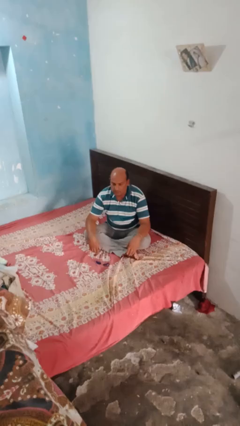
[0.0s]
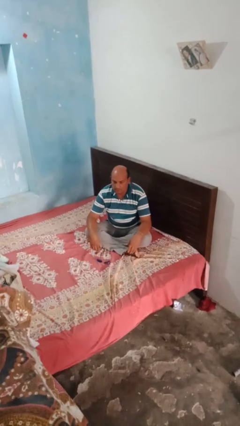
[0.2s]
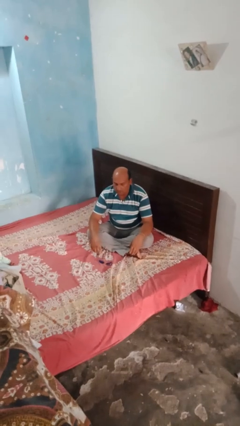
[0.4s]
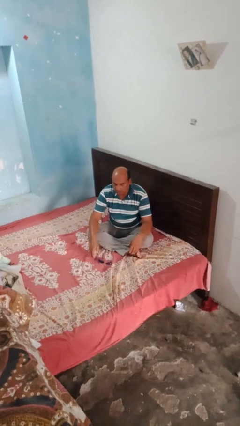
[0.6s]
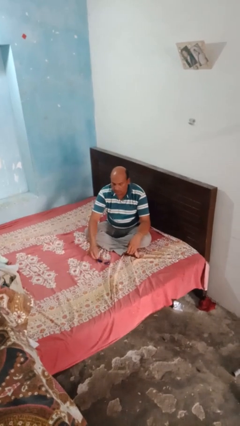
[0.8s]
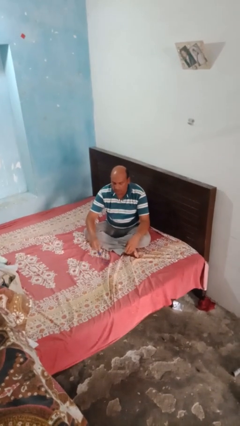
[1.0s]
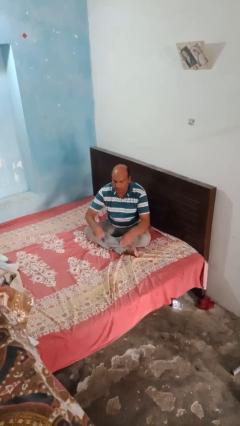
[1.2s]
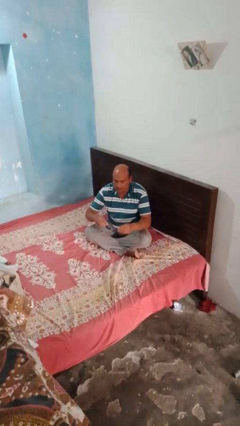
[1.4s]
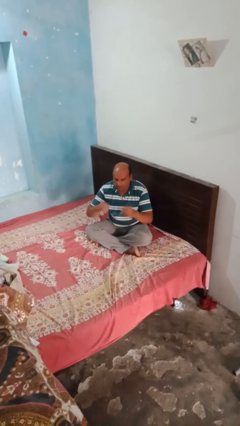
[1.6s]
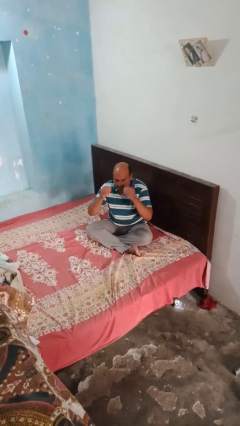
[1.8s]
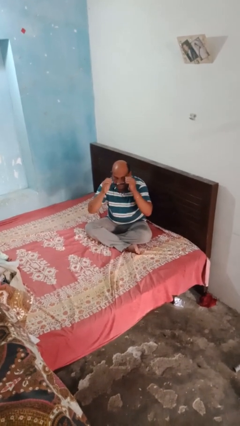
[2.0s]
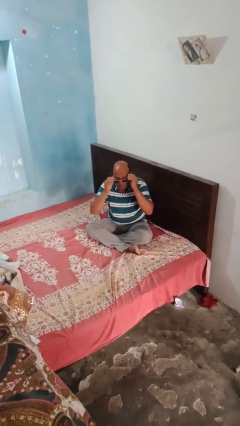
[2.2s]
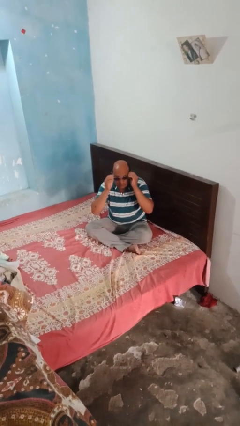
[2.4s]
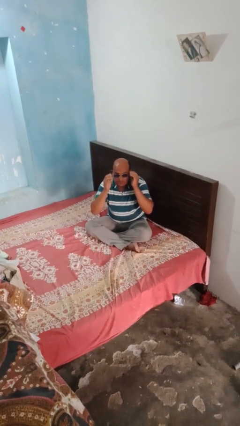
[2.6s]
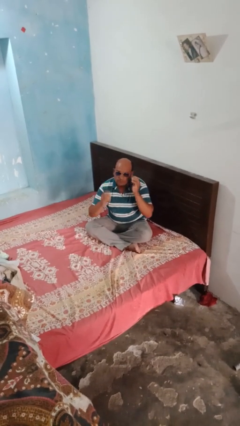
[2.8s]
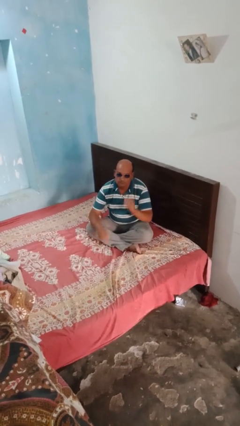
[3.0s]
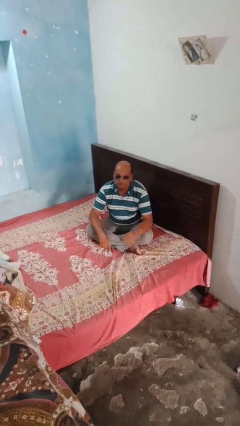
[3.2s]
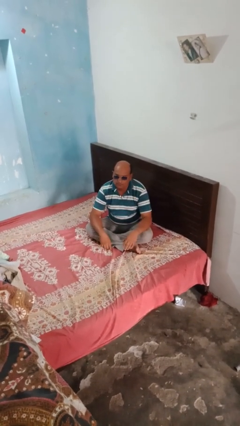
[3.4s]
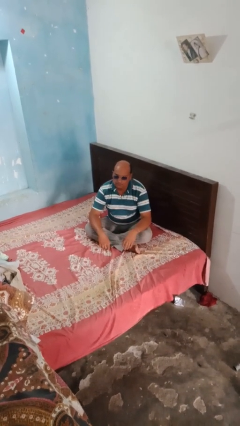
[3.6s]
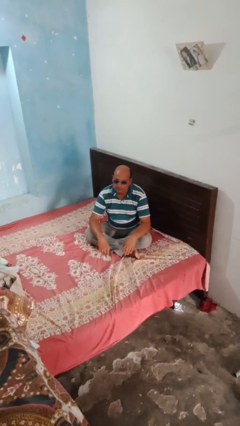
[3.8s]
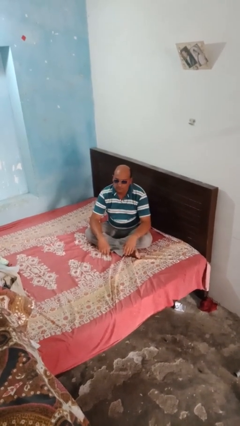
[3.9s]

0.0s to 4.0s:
person puts on sunglasses

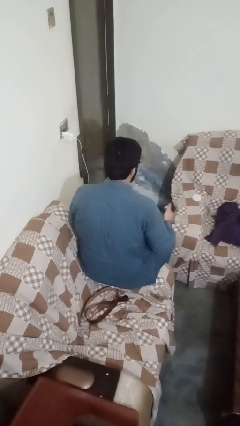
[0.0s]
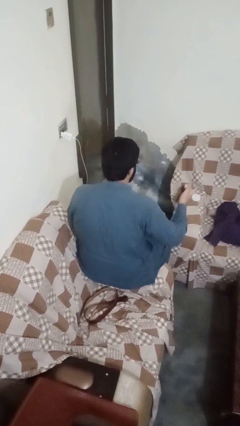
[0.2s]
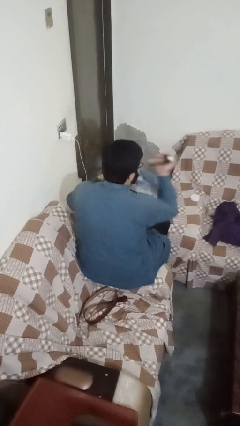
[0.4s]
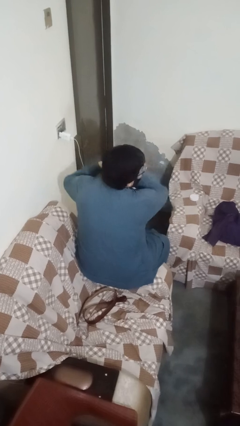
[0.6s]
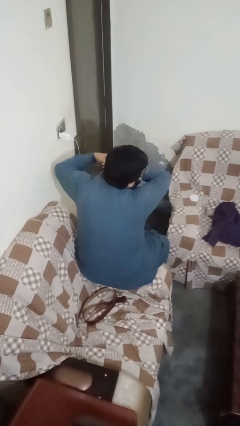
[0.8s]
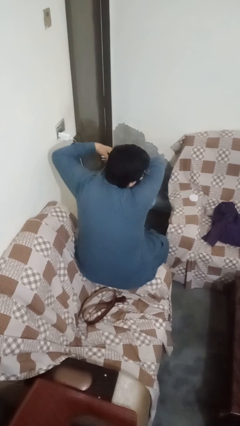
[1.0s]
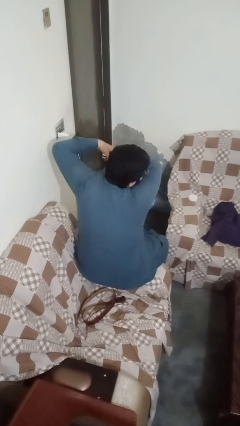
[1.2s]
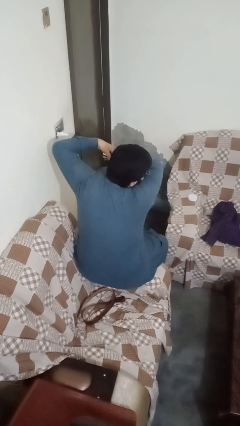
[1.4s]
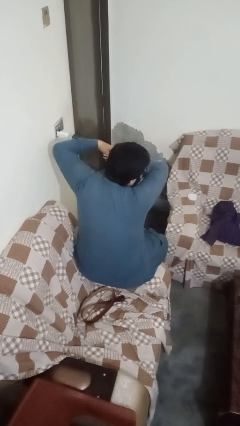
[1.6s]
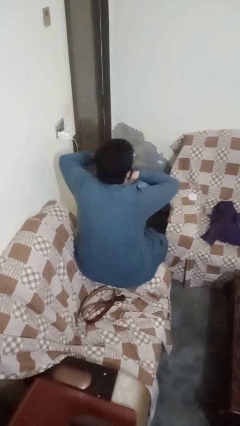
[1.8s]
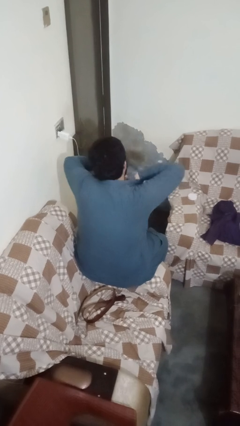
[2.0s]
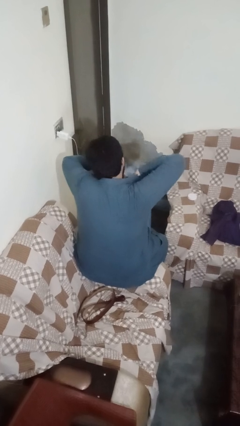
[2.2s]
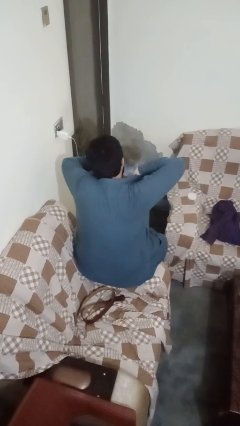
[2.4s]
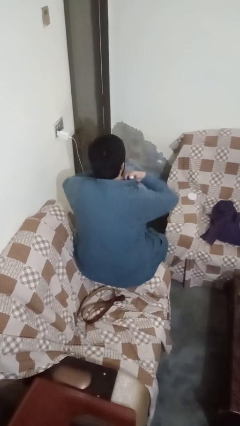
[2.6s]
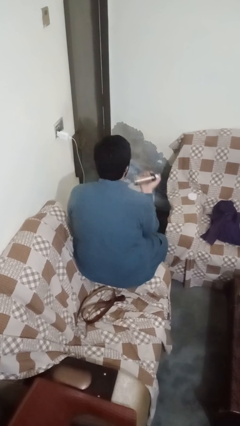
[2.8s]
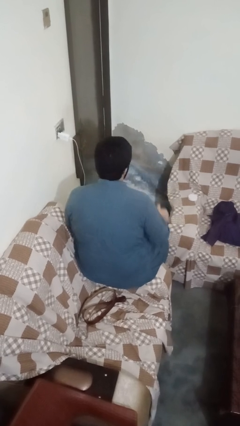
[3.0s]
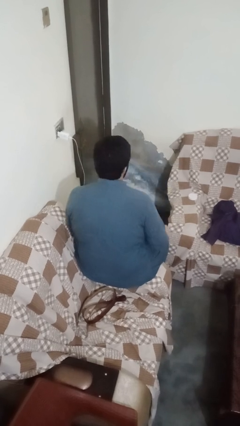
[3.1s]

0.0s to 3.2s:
person applies deodorant

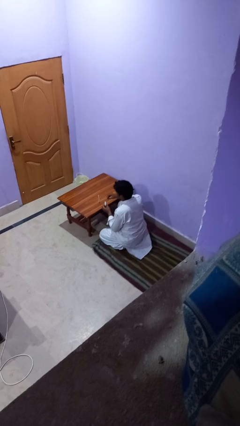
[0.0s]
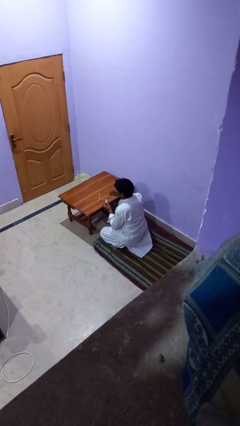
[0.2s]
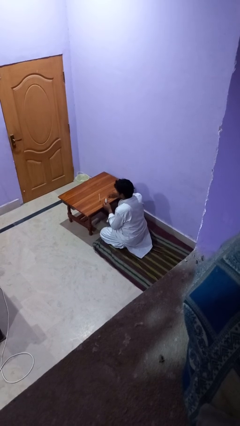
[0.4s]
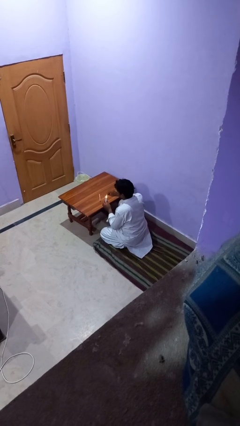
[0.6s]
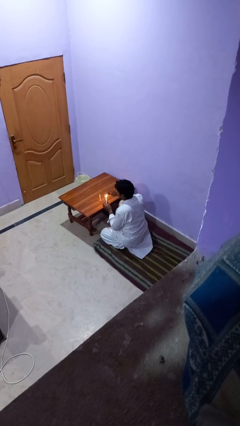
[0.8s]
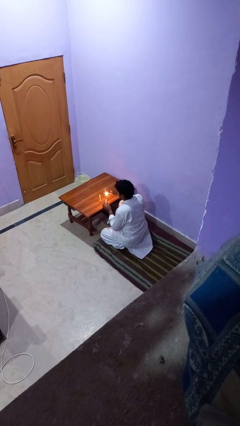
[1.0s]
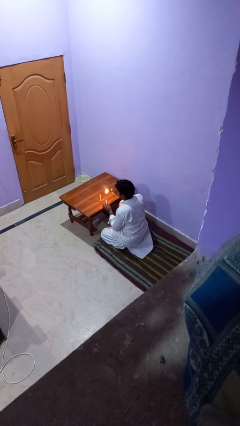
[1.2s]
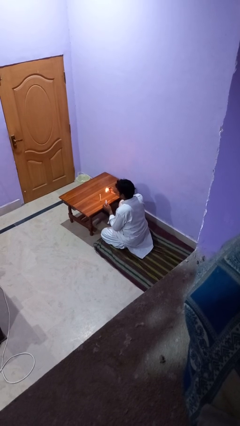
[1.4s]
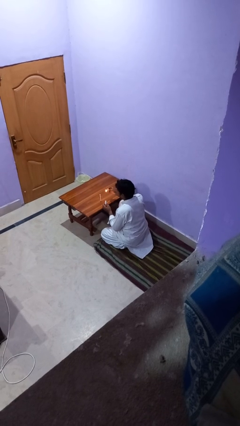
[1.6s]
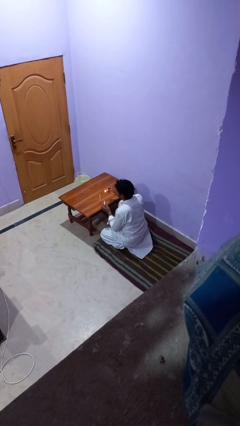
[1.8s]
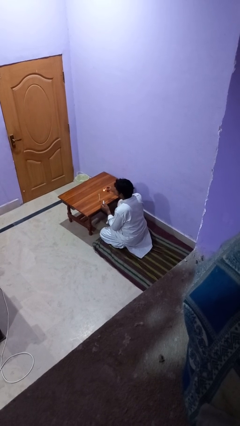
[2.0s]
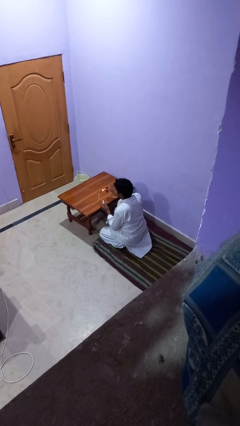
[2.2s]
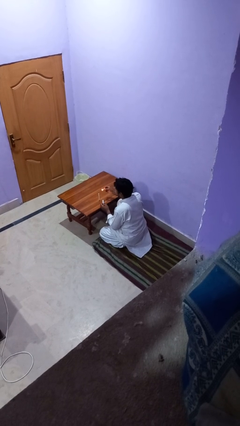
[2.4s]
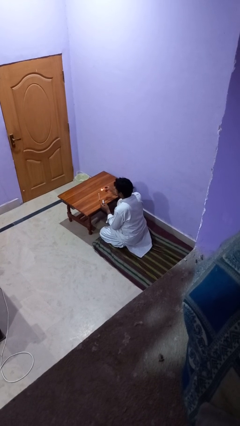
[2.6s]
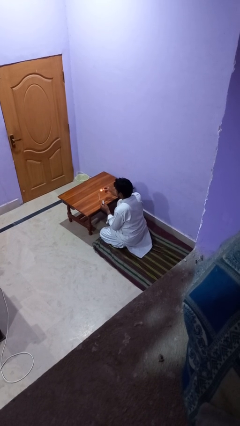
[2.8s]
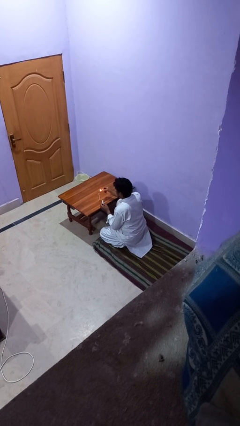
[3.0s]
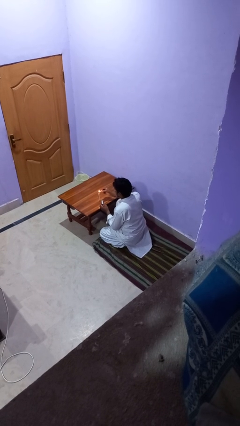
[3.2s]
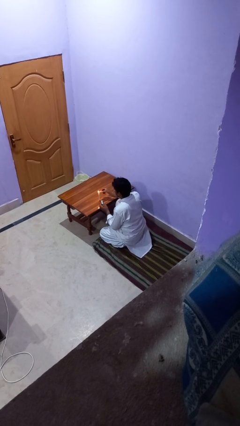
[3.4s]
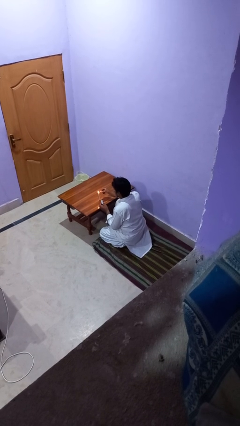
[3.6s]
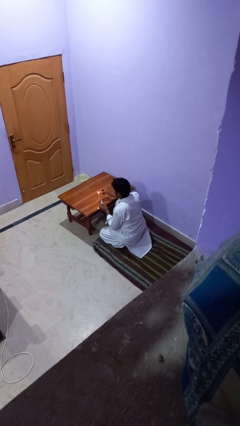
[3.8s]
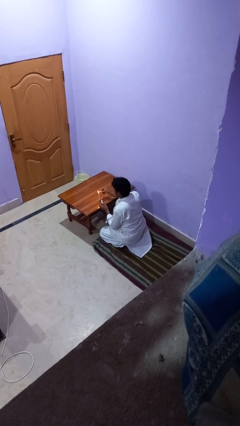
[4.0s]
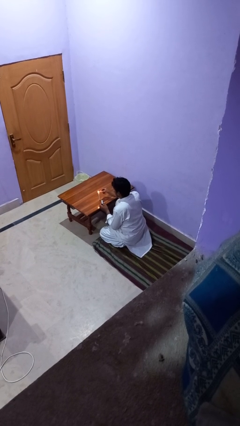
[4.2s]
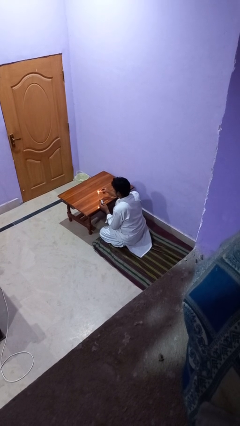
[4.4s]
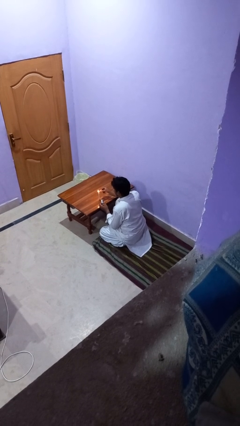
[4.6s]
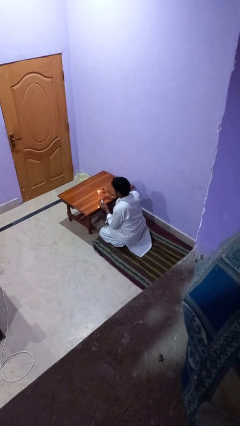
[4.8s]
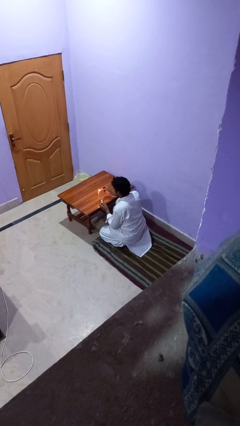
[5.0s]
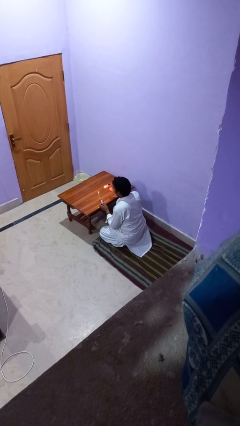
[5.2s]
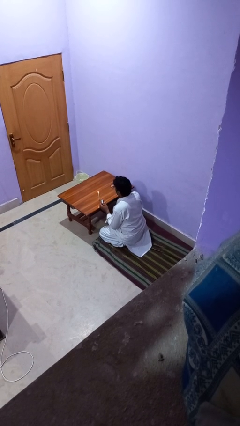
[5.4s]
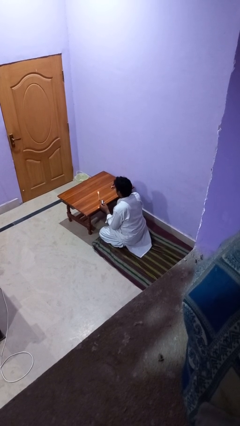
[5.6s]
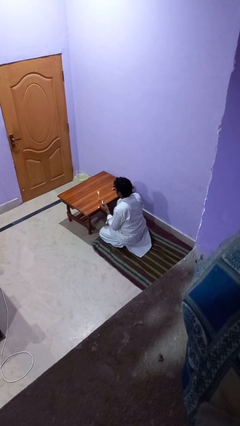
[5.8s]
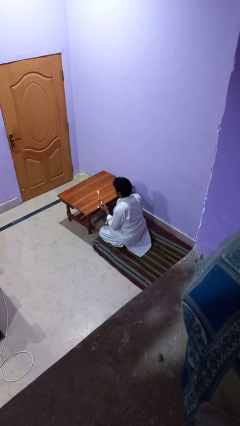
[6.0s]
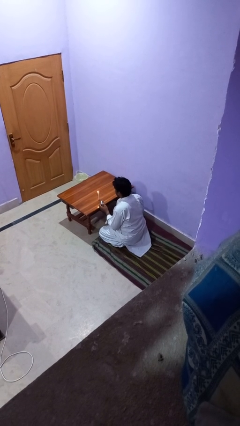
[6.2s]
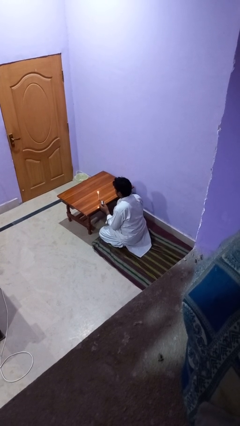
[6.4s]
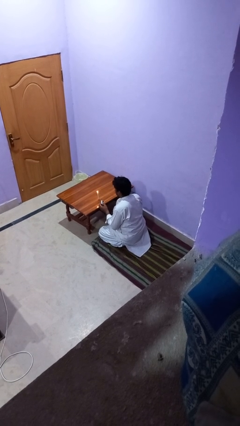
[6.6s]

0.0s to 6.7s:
person lights candle

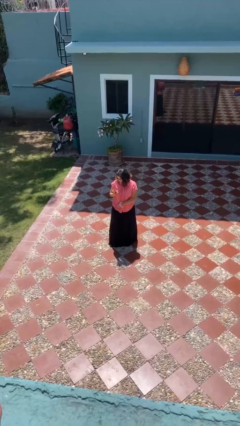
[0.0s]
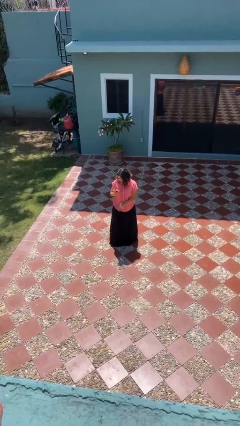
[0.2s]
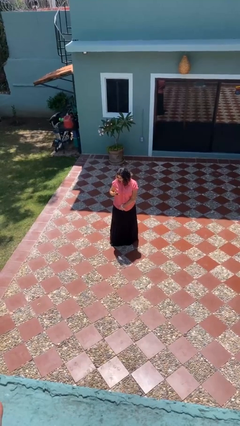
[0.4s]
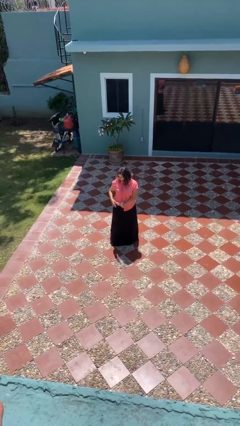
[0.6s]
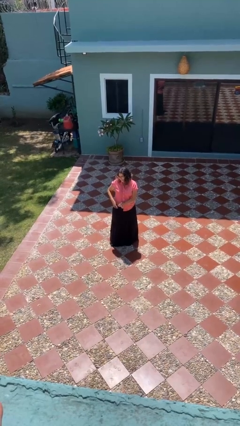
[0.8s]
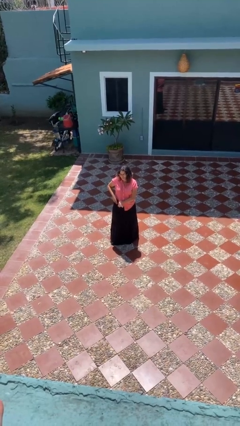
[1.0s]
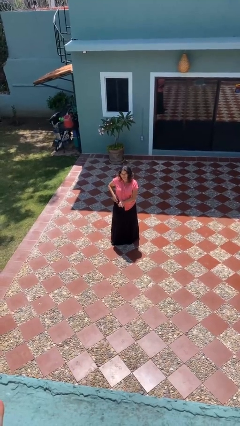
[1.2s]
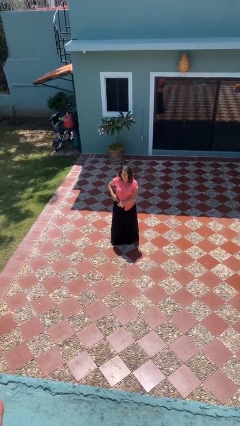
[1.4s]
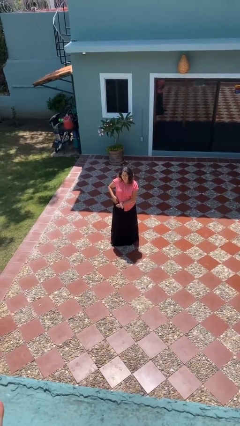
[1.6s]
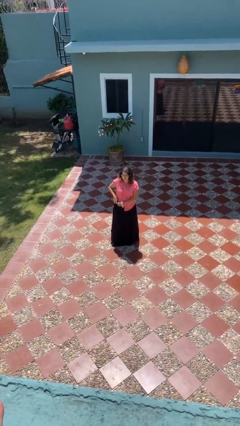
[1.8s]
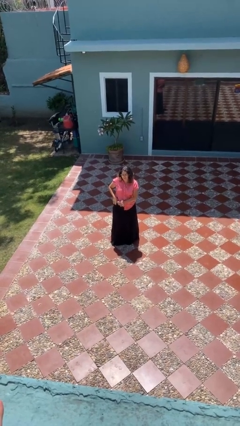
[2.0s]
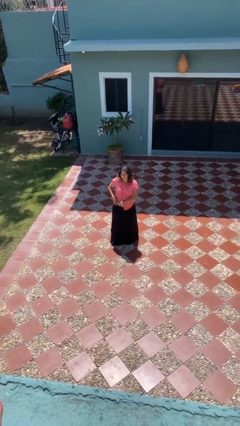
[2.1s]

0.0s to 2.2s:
person puts phone into pocket

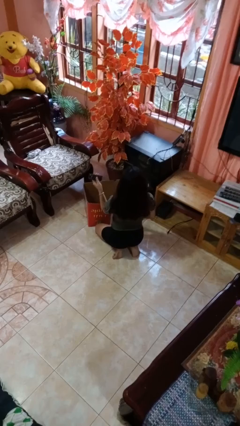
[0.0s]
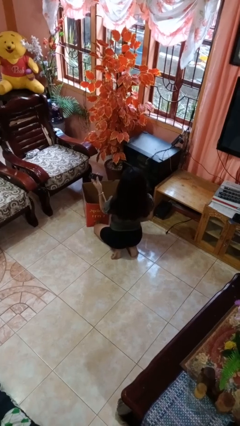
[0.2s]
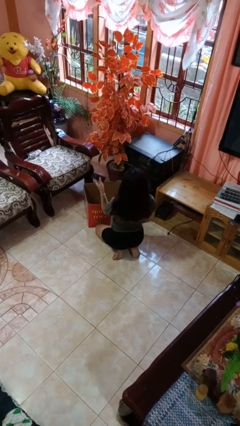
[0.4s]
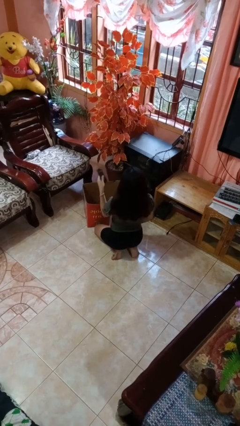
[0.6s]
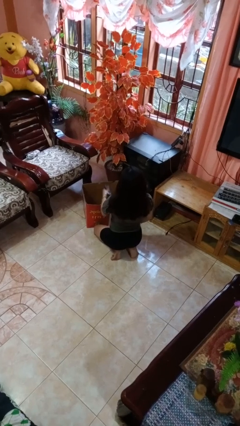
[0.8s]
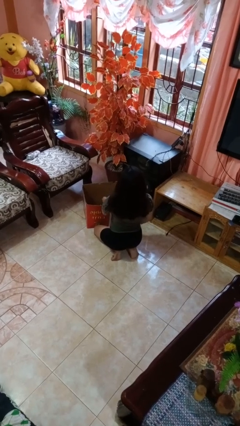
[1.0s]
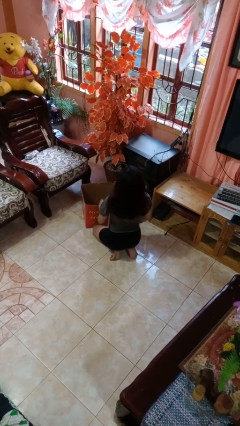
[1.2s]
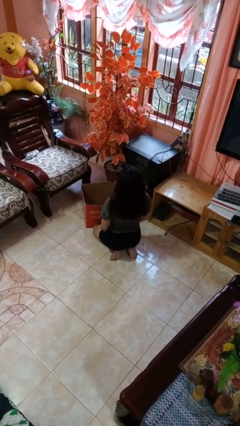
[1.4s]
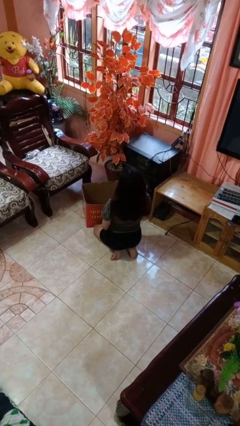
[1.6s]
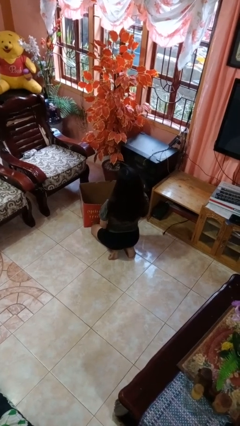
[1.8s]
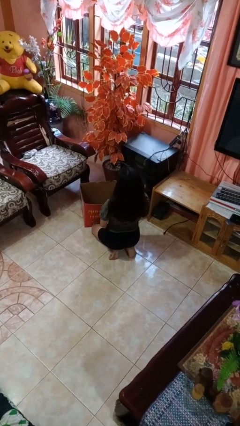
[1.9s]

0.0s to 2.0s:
person puts object into box
